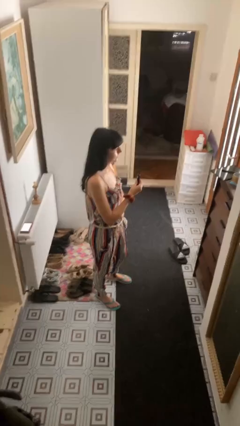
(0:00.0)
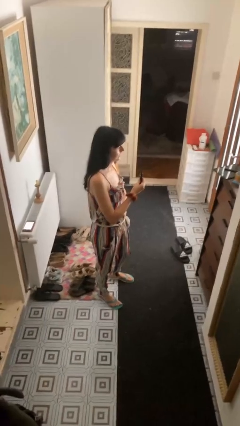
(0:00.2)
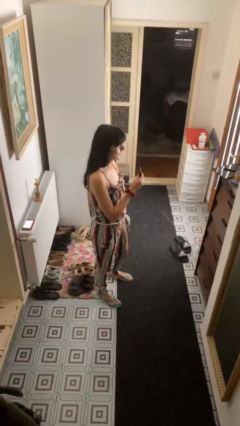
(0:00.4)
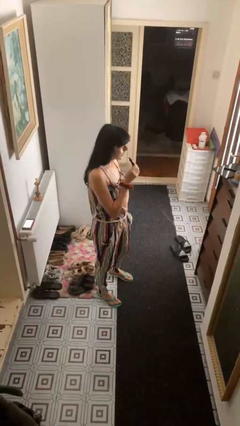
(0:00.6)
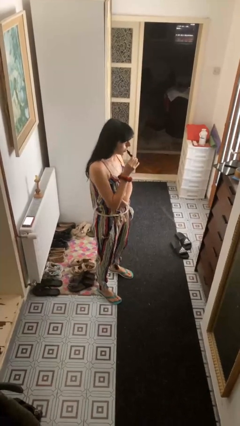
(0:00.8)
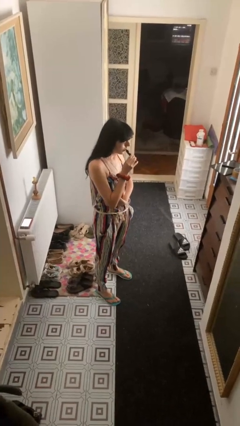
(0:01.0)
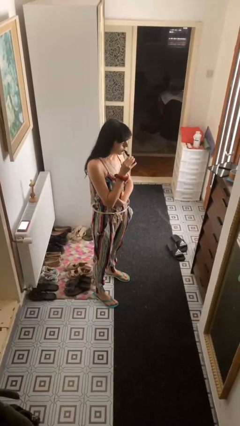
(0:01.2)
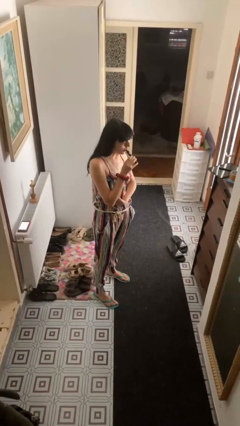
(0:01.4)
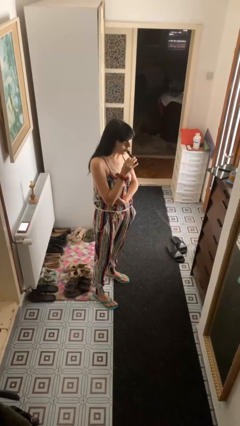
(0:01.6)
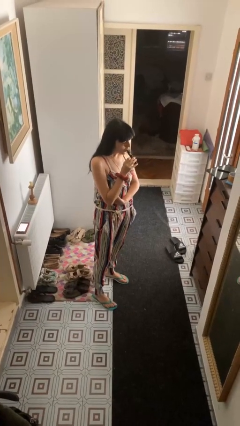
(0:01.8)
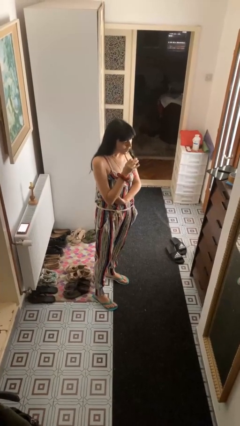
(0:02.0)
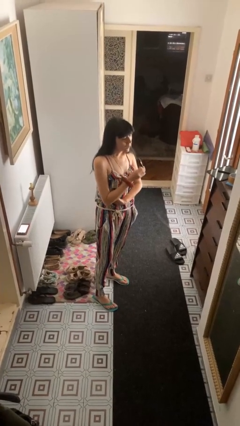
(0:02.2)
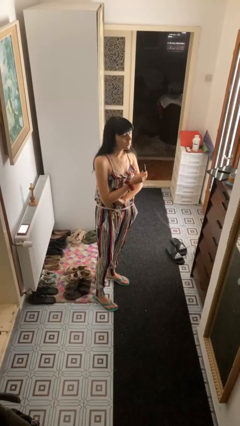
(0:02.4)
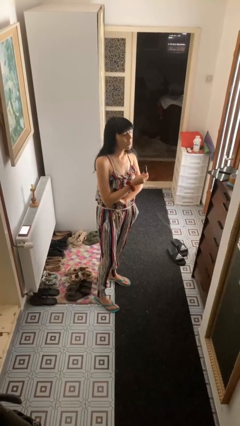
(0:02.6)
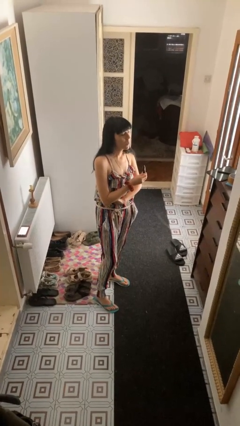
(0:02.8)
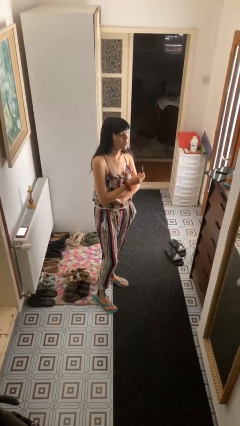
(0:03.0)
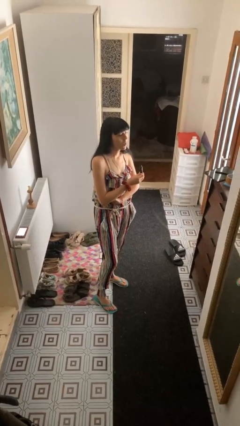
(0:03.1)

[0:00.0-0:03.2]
person vapes

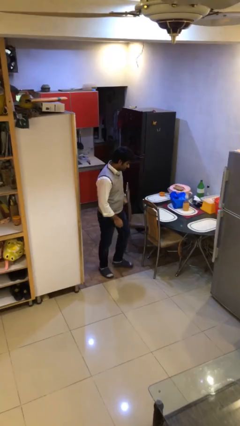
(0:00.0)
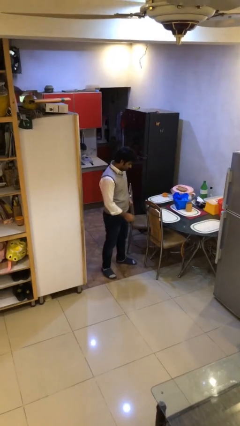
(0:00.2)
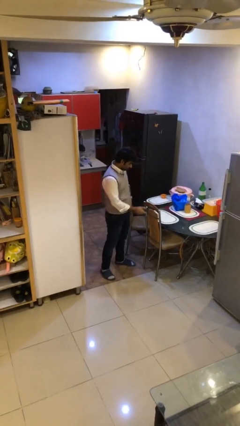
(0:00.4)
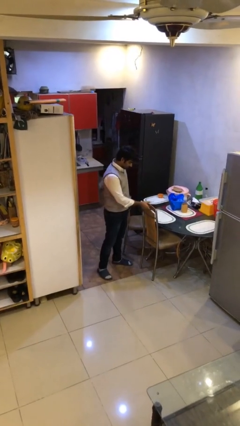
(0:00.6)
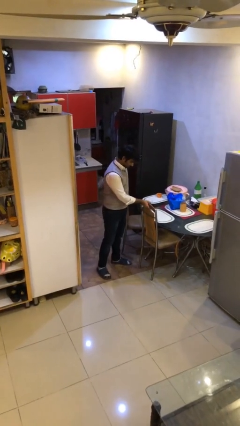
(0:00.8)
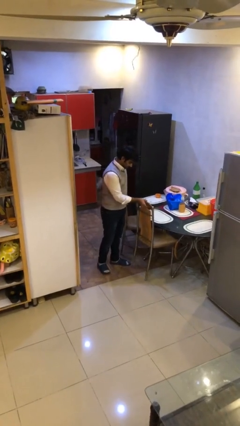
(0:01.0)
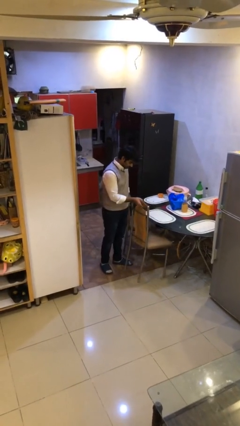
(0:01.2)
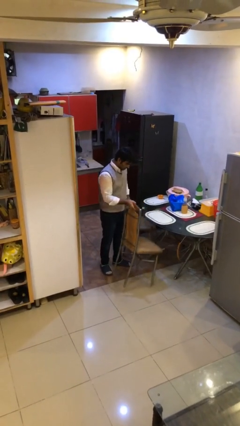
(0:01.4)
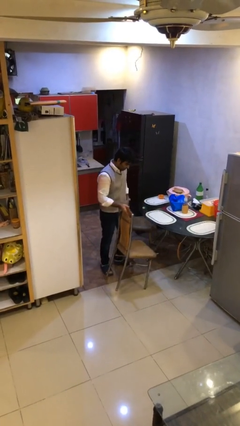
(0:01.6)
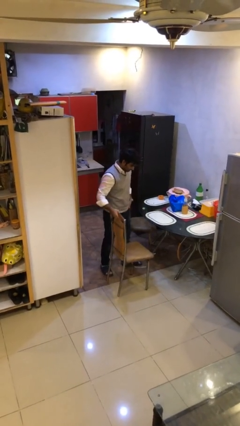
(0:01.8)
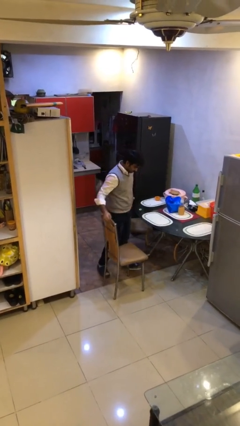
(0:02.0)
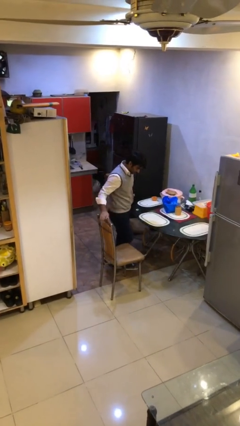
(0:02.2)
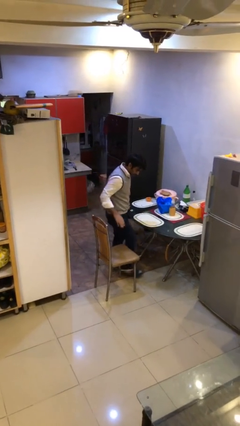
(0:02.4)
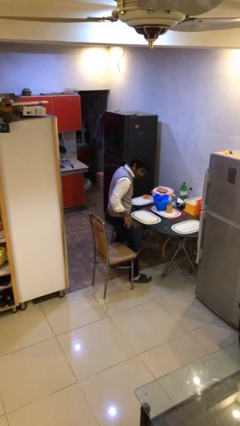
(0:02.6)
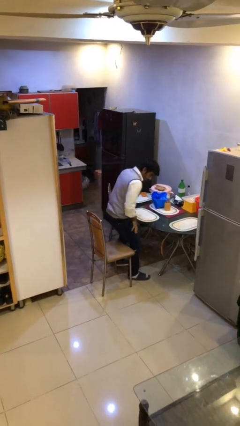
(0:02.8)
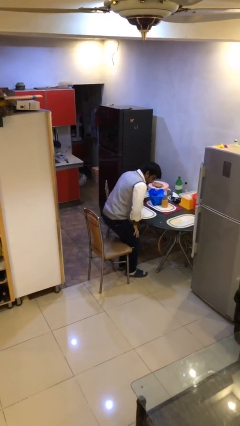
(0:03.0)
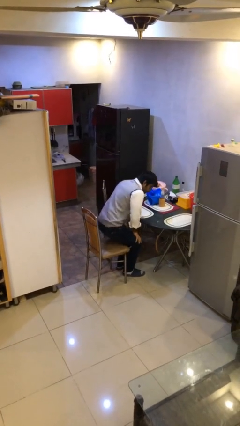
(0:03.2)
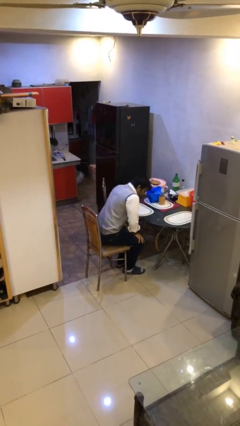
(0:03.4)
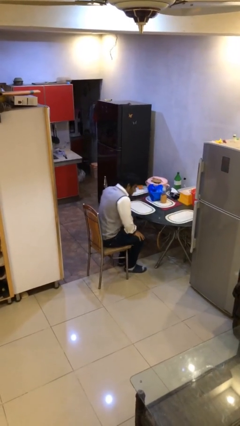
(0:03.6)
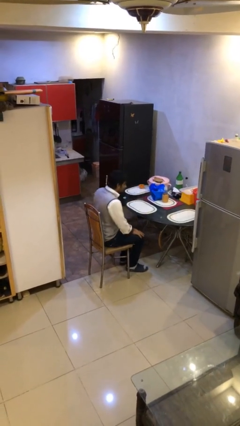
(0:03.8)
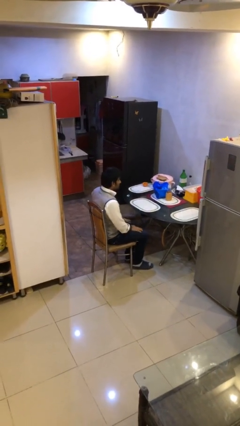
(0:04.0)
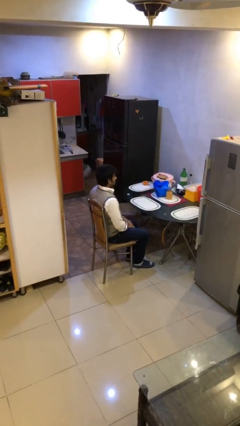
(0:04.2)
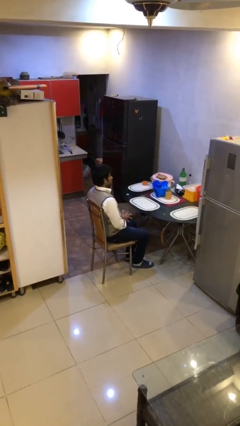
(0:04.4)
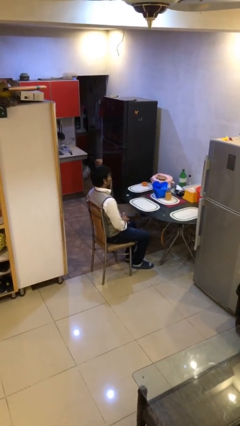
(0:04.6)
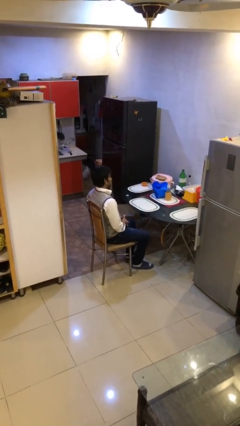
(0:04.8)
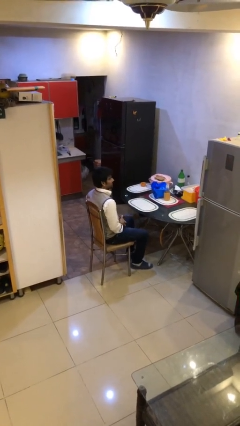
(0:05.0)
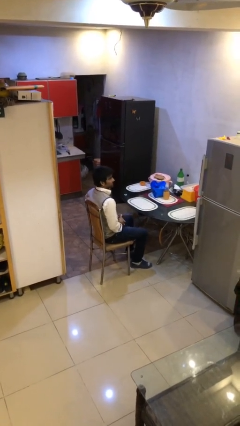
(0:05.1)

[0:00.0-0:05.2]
person sits down

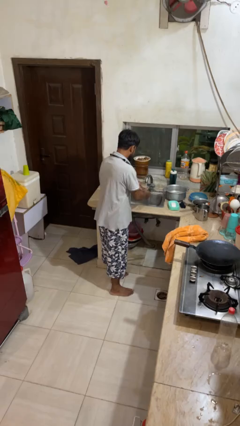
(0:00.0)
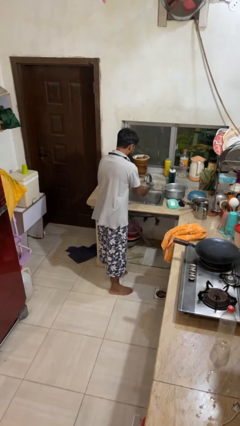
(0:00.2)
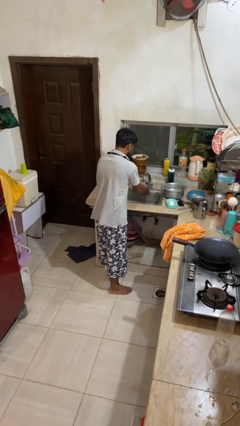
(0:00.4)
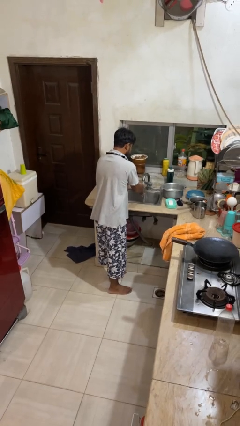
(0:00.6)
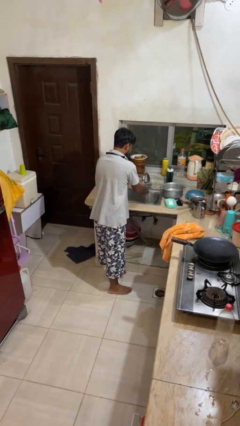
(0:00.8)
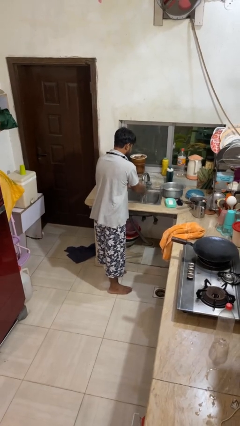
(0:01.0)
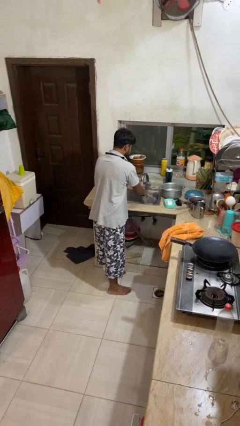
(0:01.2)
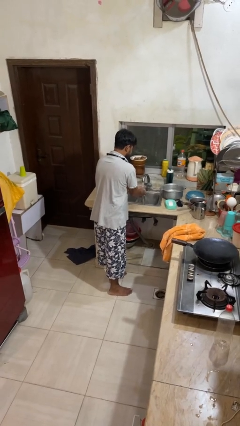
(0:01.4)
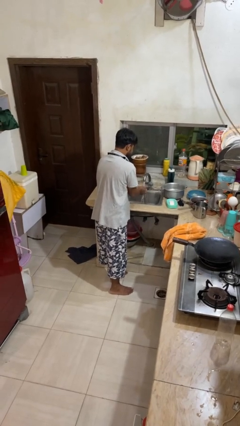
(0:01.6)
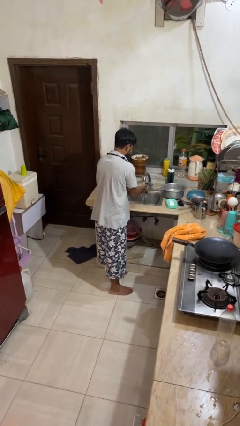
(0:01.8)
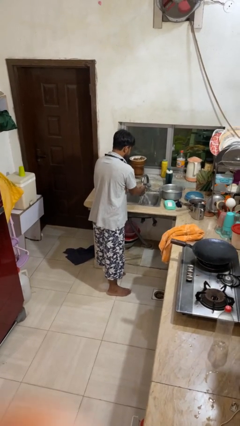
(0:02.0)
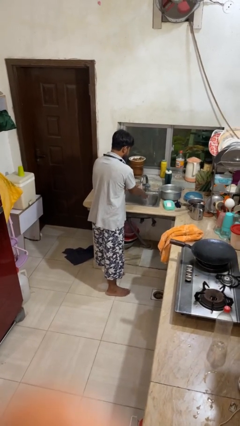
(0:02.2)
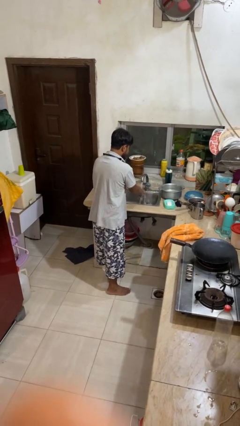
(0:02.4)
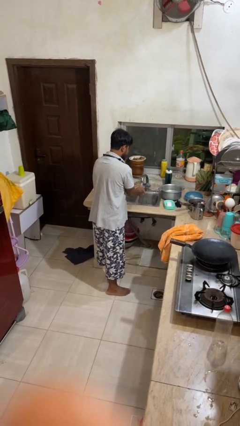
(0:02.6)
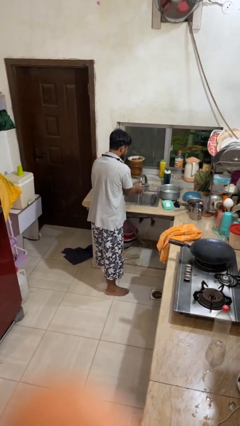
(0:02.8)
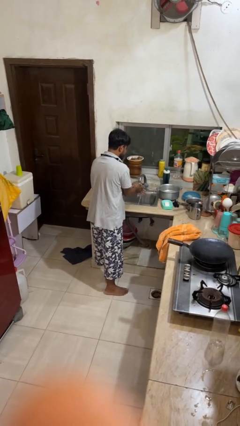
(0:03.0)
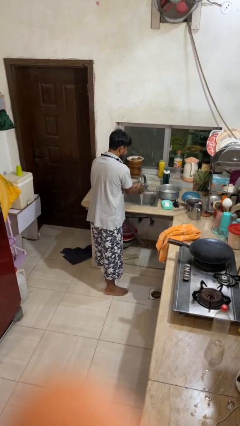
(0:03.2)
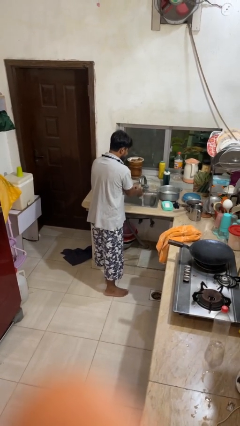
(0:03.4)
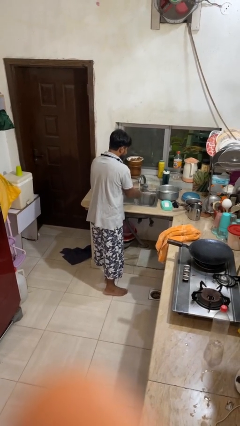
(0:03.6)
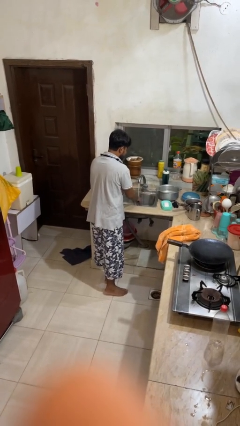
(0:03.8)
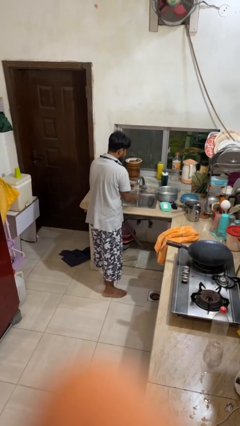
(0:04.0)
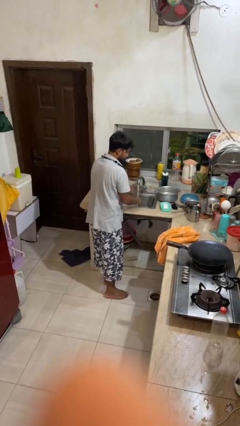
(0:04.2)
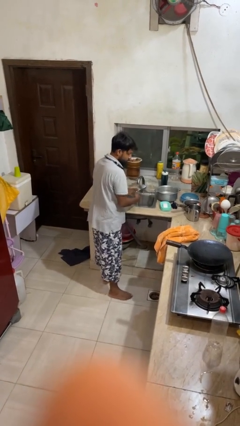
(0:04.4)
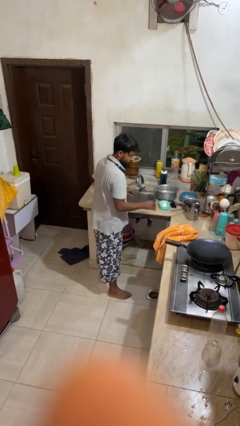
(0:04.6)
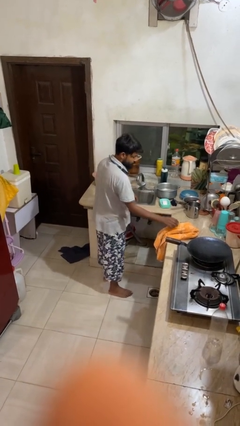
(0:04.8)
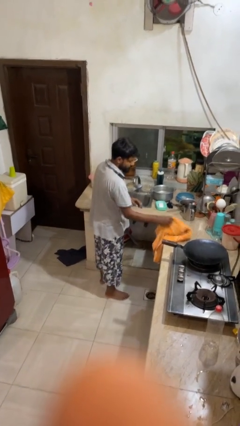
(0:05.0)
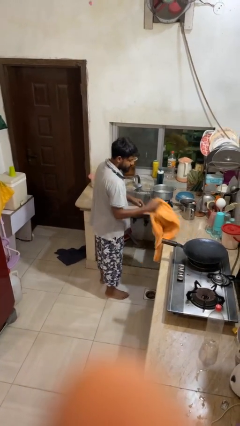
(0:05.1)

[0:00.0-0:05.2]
person washes hands

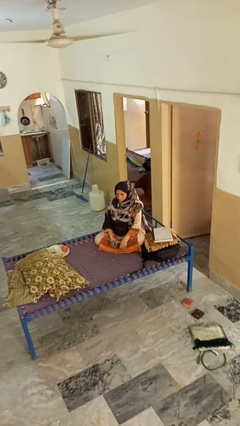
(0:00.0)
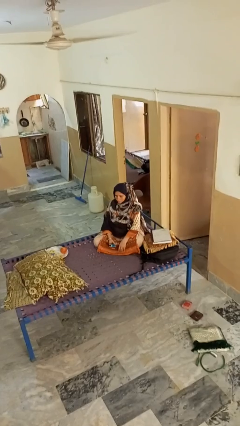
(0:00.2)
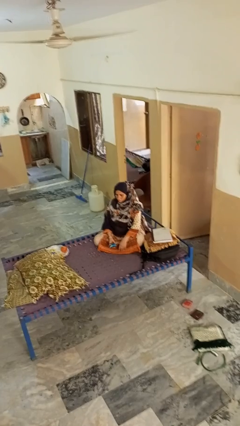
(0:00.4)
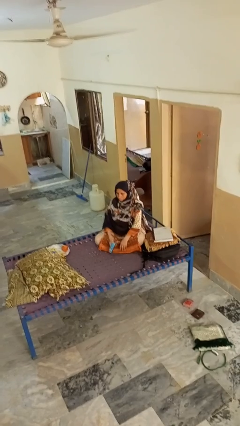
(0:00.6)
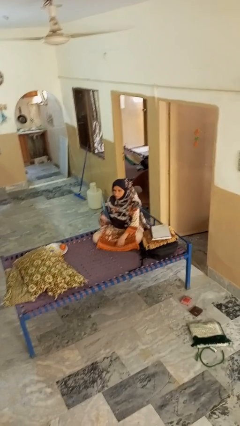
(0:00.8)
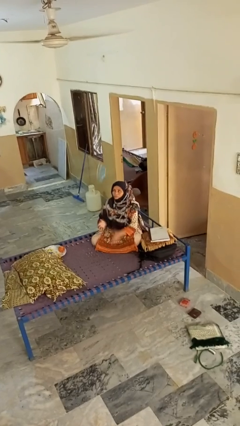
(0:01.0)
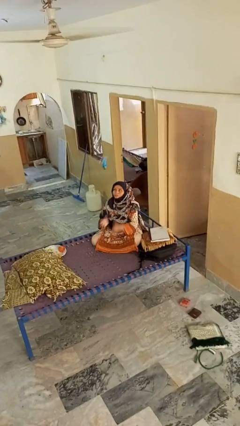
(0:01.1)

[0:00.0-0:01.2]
person drops object

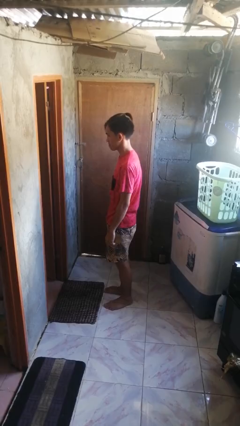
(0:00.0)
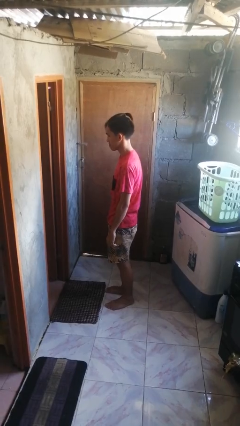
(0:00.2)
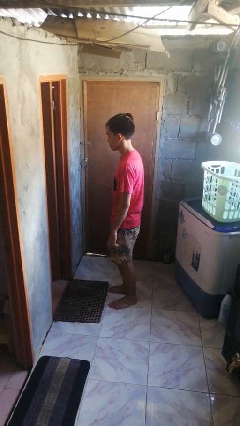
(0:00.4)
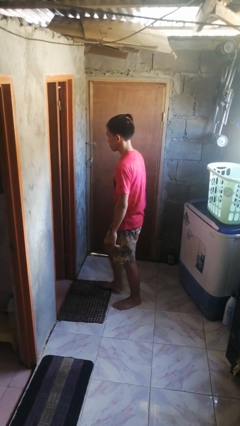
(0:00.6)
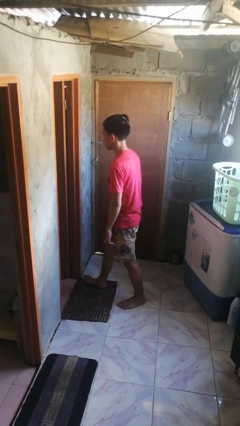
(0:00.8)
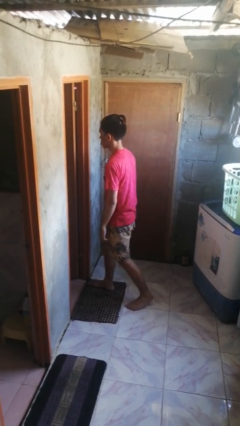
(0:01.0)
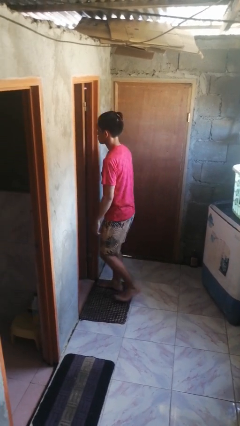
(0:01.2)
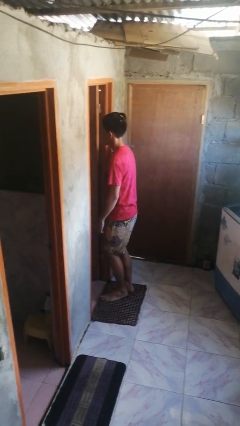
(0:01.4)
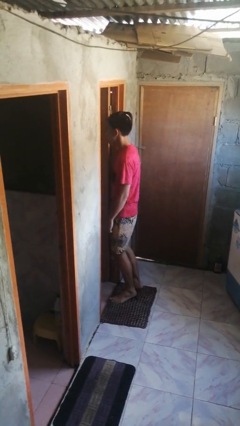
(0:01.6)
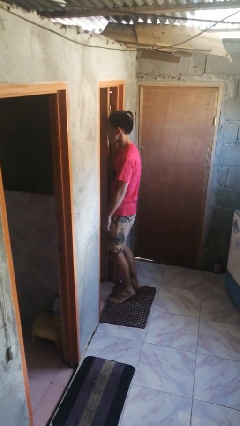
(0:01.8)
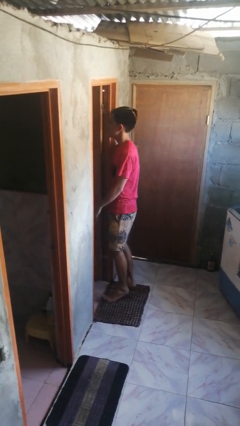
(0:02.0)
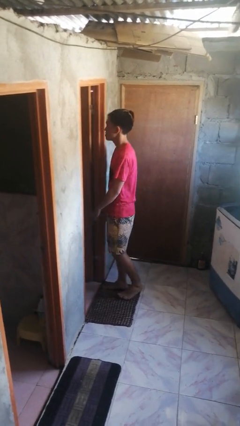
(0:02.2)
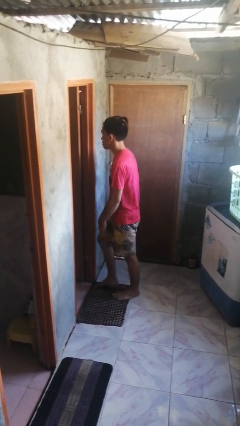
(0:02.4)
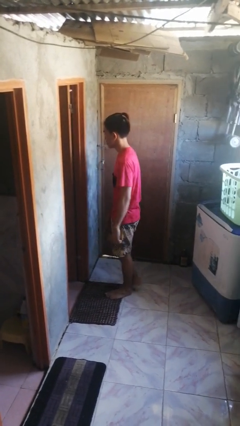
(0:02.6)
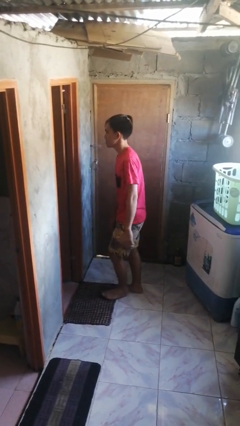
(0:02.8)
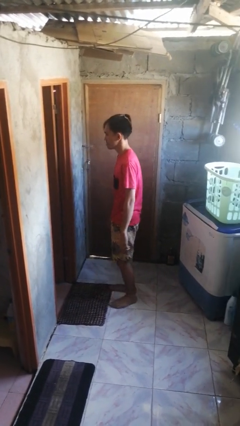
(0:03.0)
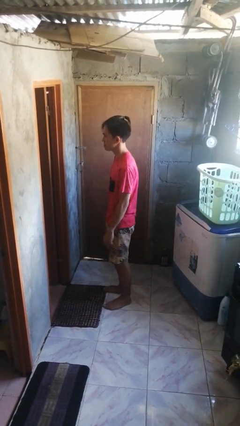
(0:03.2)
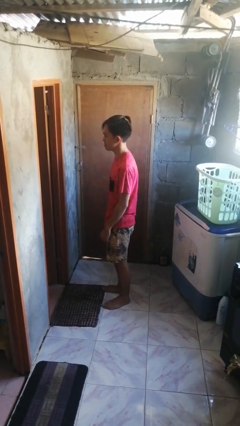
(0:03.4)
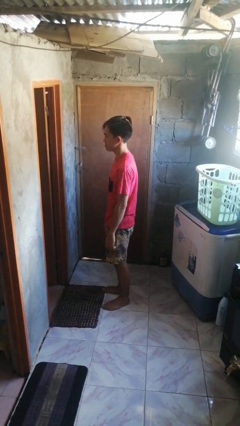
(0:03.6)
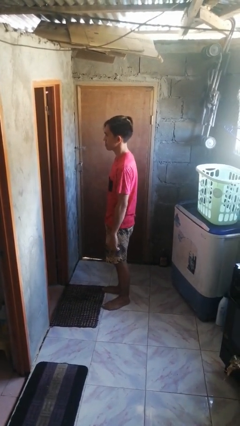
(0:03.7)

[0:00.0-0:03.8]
person bumps into wall
